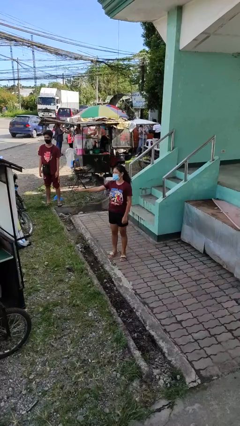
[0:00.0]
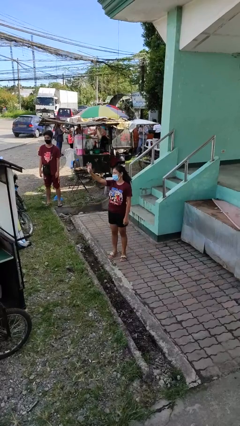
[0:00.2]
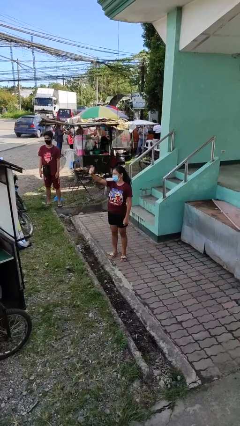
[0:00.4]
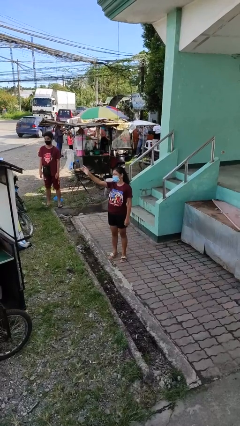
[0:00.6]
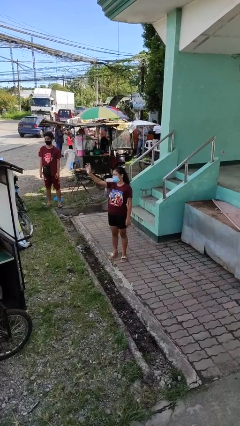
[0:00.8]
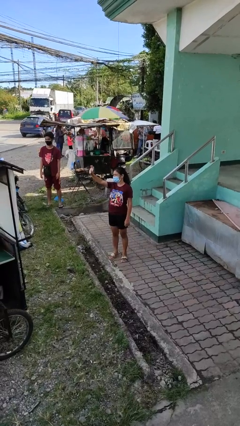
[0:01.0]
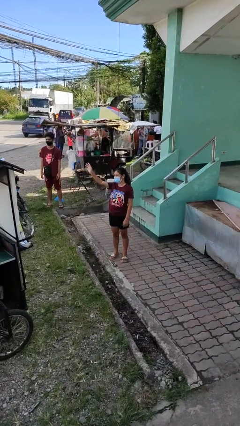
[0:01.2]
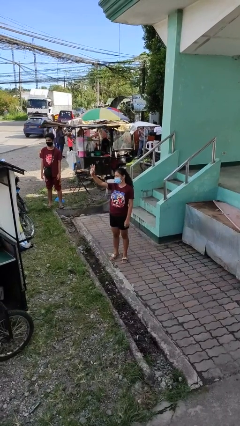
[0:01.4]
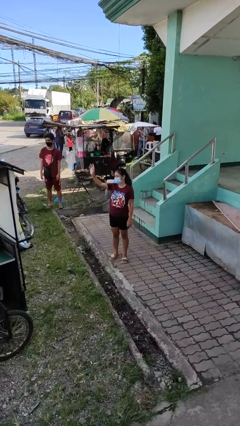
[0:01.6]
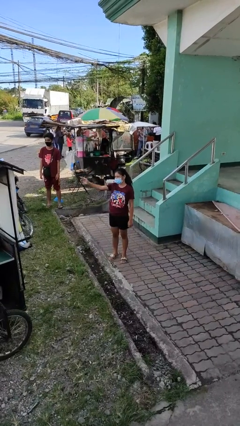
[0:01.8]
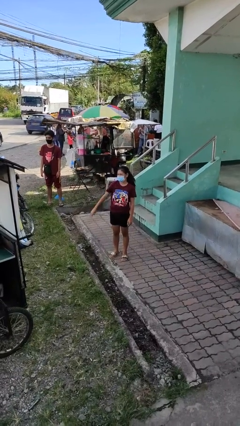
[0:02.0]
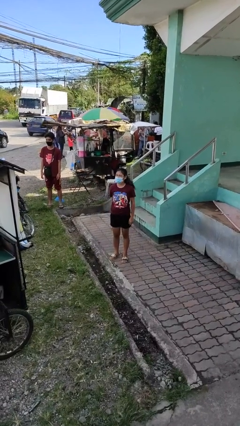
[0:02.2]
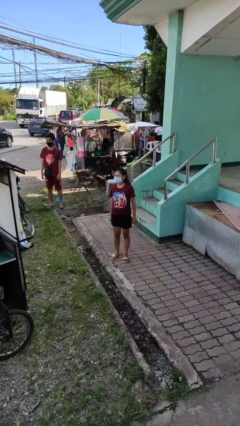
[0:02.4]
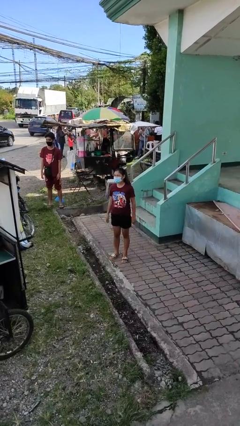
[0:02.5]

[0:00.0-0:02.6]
person waves at person

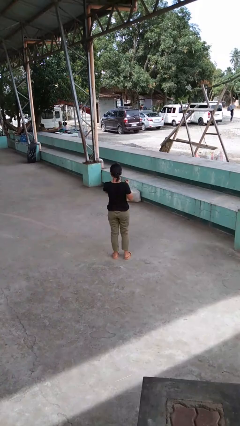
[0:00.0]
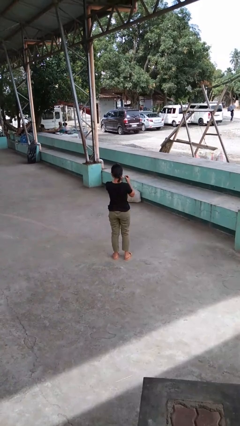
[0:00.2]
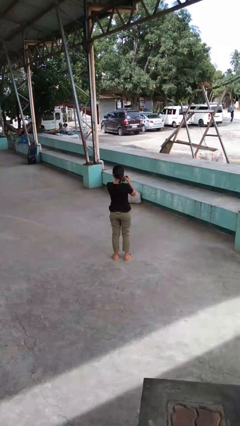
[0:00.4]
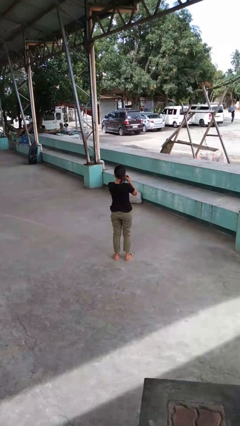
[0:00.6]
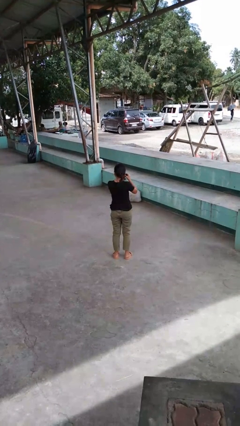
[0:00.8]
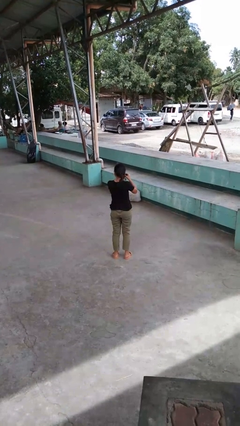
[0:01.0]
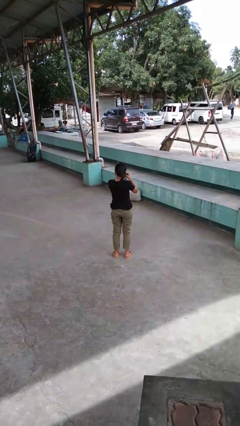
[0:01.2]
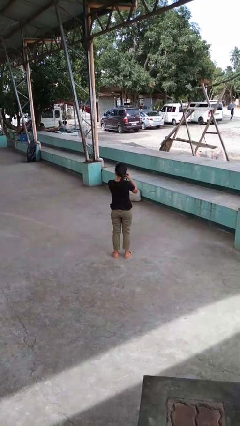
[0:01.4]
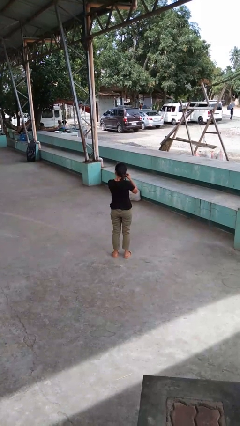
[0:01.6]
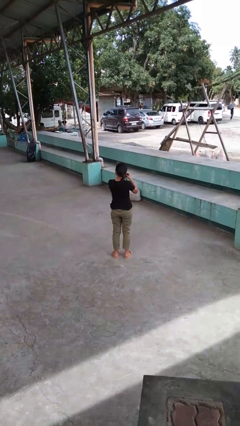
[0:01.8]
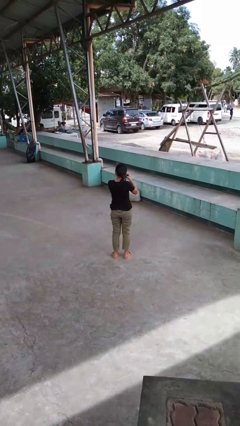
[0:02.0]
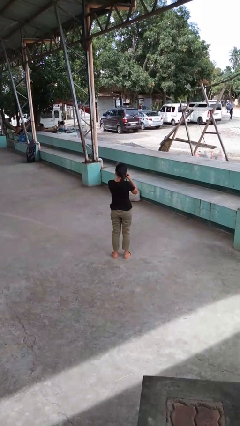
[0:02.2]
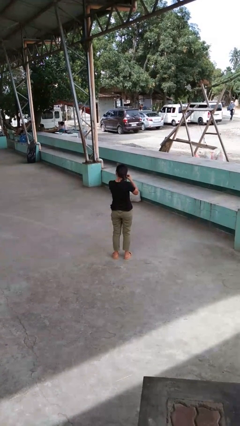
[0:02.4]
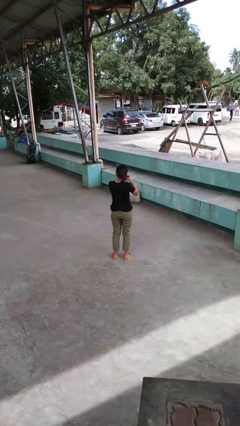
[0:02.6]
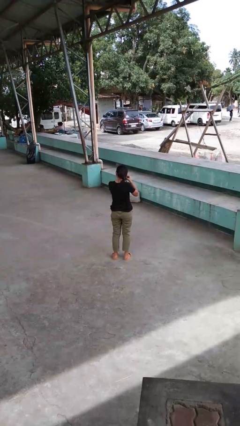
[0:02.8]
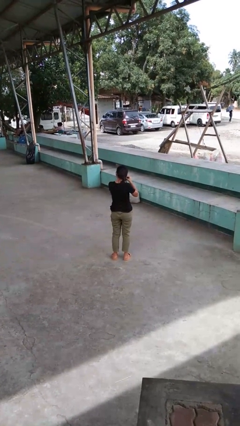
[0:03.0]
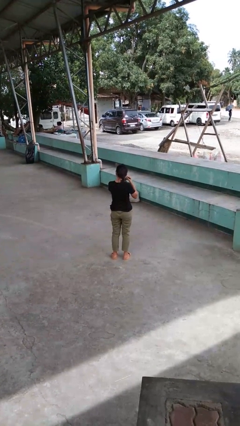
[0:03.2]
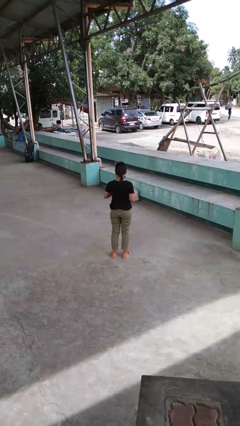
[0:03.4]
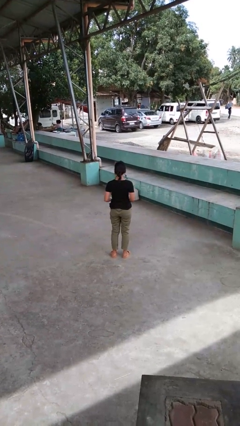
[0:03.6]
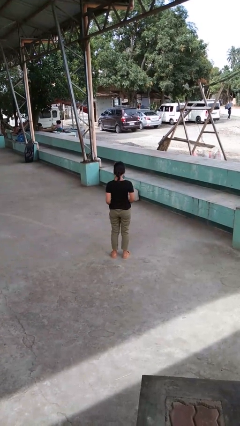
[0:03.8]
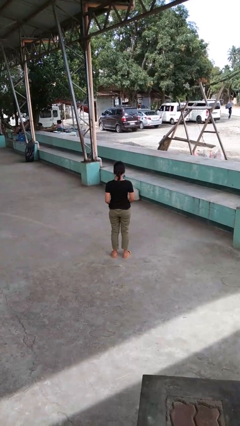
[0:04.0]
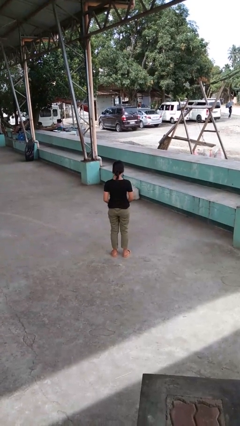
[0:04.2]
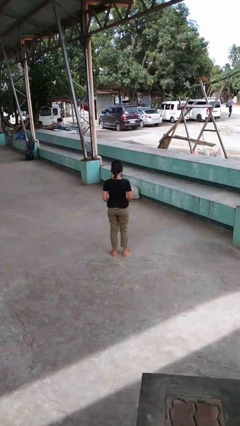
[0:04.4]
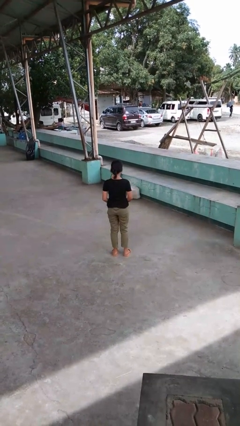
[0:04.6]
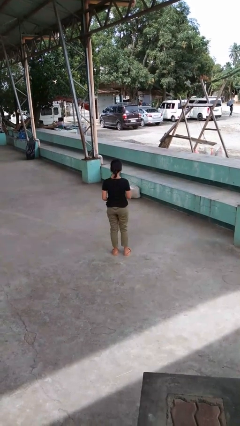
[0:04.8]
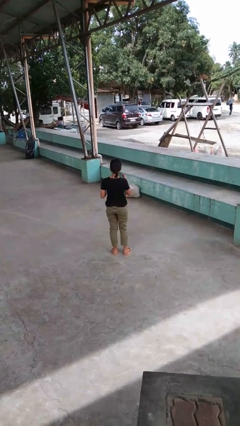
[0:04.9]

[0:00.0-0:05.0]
person puts on earrings

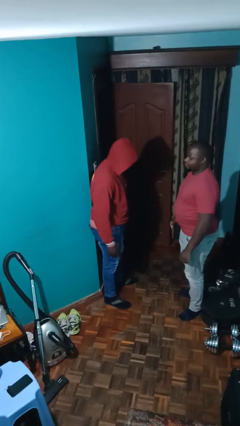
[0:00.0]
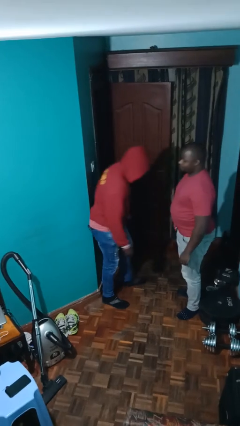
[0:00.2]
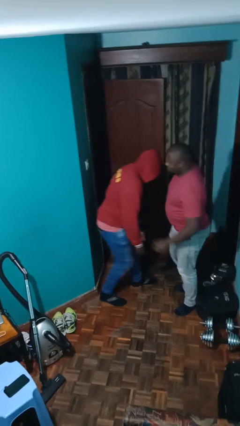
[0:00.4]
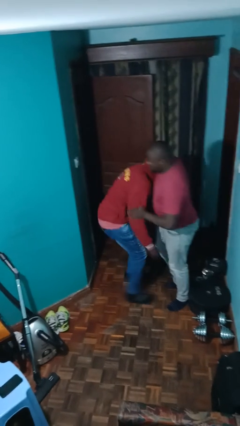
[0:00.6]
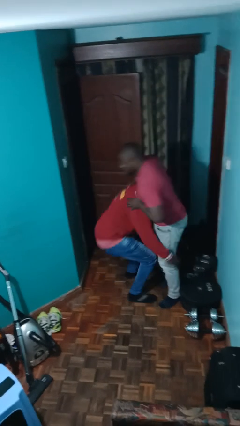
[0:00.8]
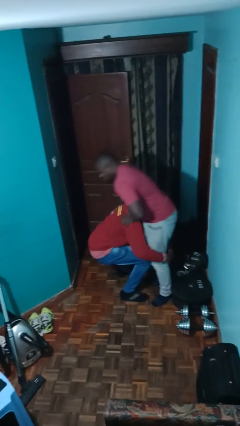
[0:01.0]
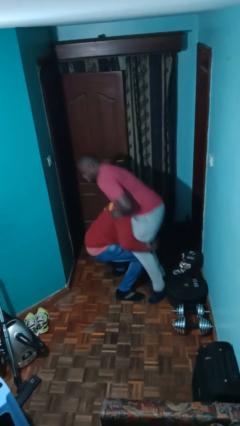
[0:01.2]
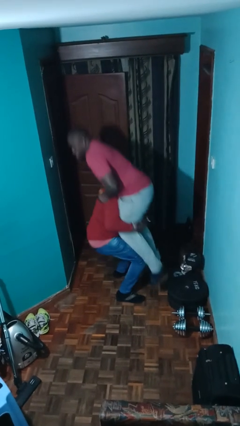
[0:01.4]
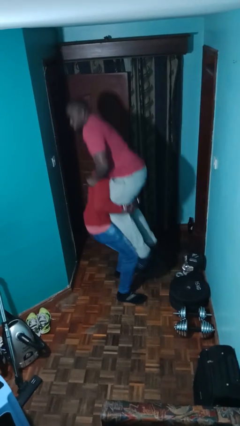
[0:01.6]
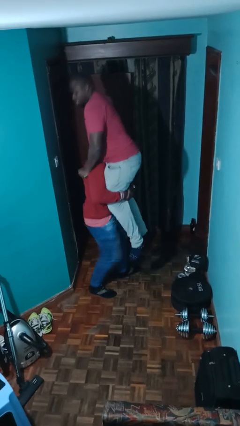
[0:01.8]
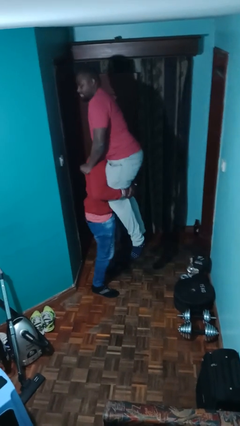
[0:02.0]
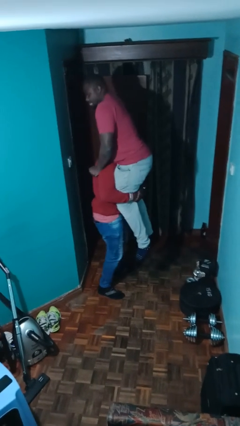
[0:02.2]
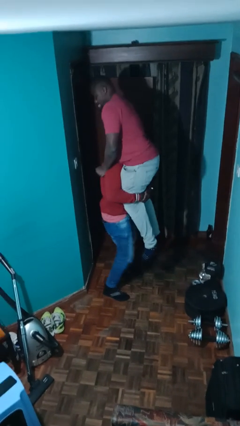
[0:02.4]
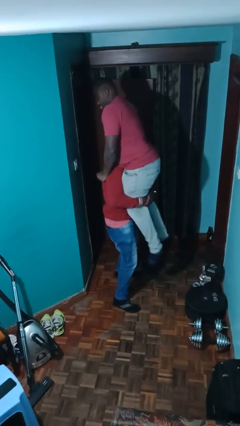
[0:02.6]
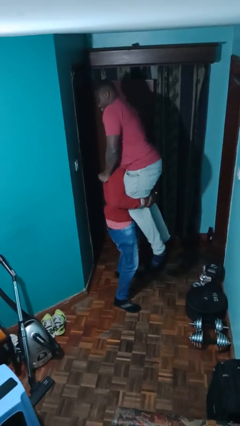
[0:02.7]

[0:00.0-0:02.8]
person picks up person

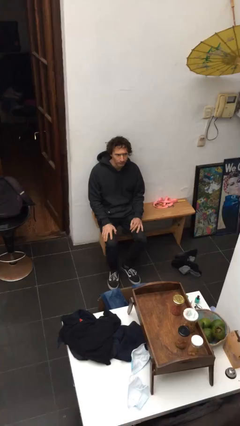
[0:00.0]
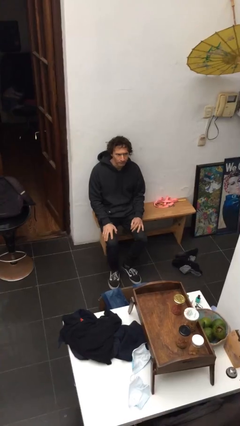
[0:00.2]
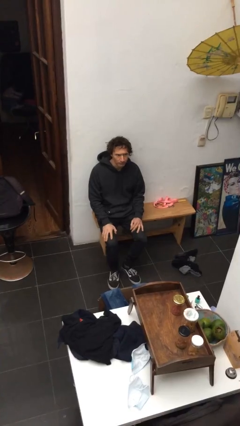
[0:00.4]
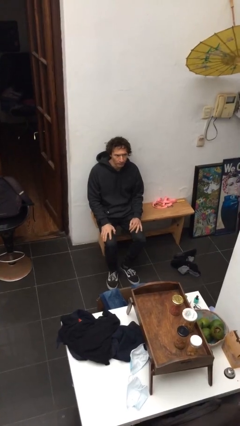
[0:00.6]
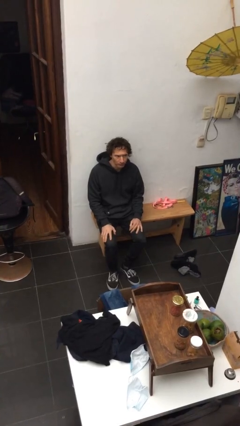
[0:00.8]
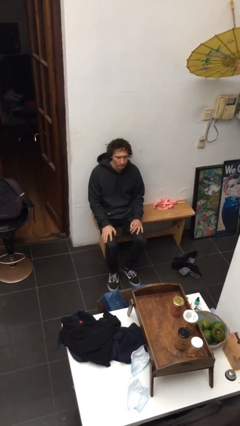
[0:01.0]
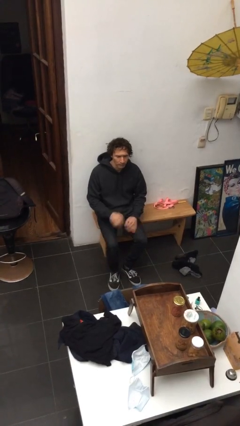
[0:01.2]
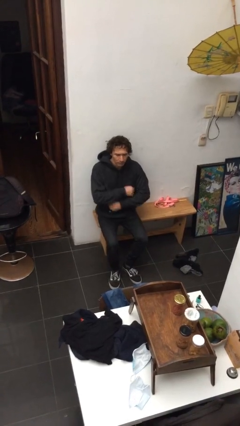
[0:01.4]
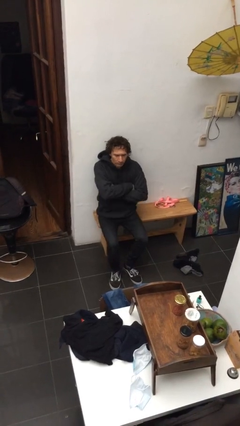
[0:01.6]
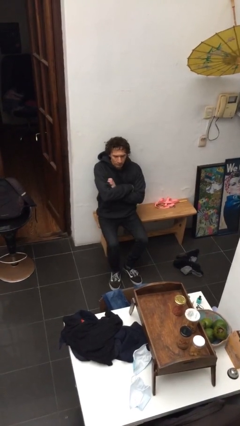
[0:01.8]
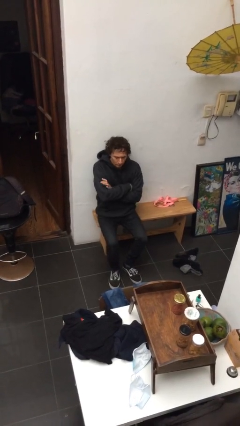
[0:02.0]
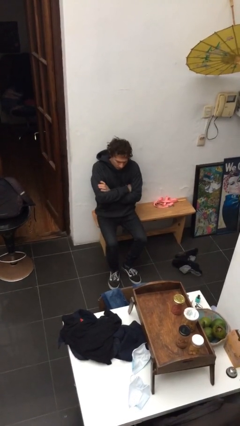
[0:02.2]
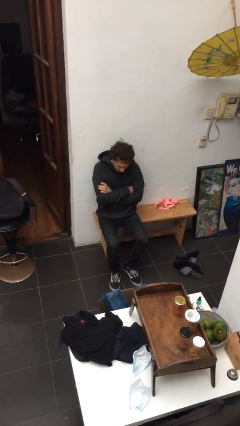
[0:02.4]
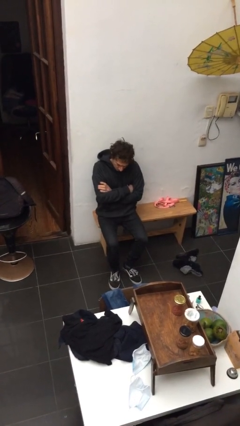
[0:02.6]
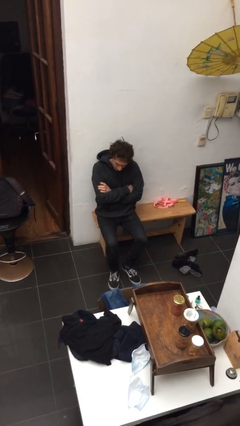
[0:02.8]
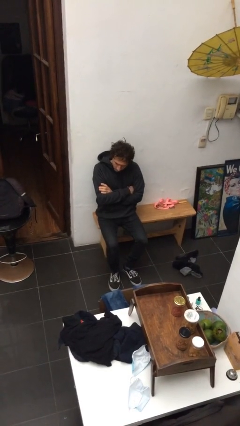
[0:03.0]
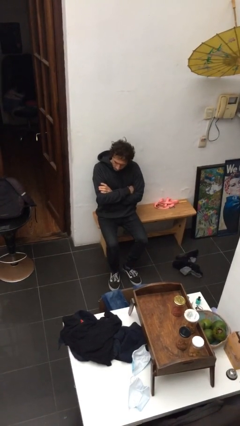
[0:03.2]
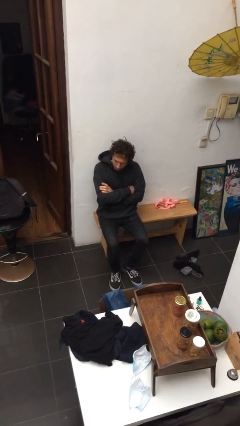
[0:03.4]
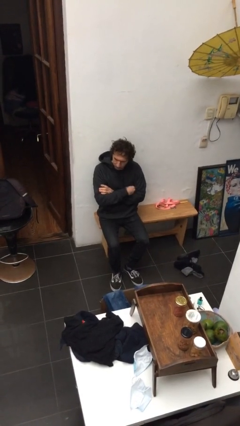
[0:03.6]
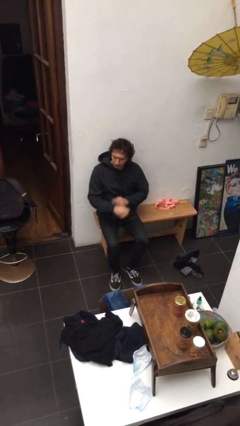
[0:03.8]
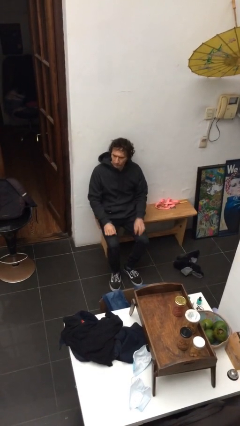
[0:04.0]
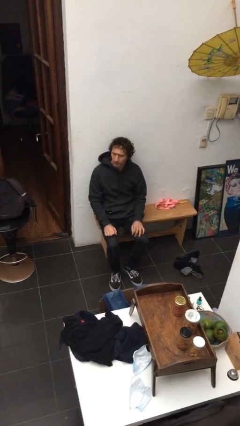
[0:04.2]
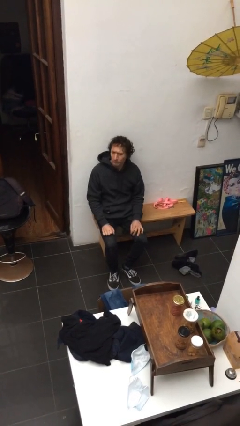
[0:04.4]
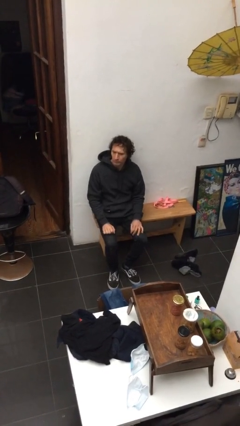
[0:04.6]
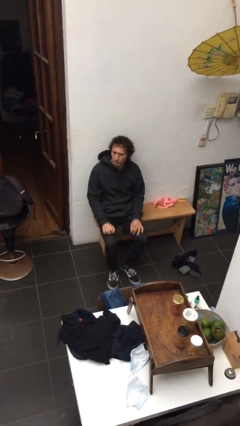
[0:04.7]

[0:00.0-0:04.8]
person crosses arms

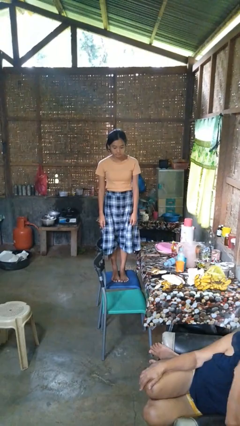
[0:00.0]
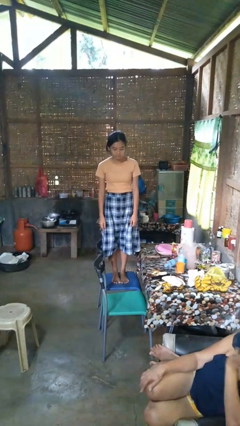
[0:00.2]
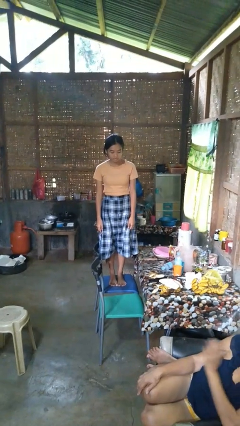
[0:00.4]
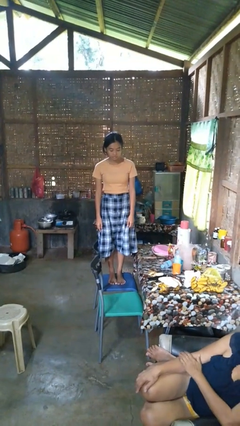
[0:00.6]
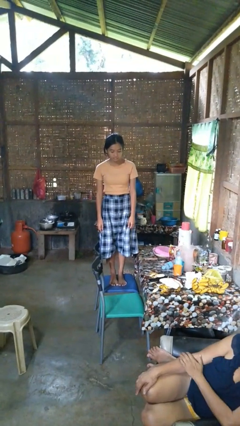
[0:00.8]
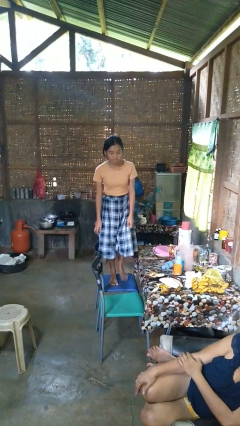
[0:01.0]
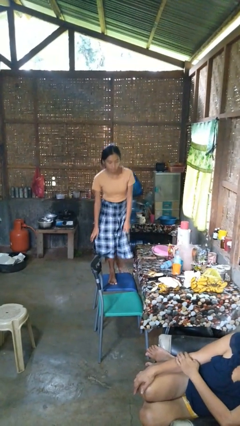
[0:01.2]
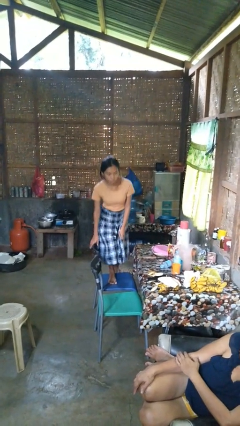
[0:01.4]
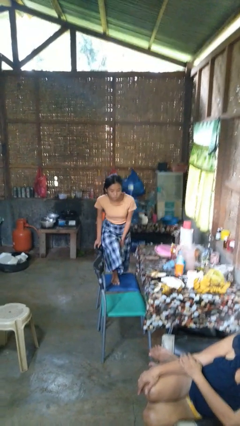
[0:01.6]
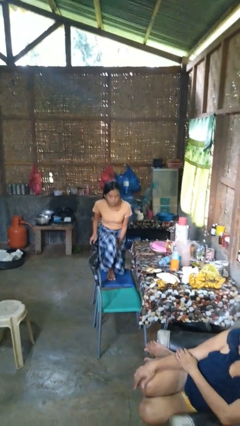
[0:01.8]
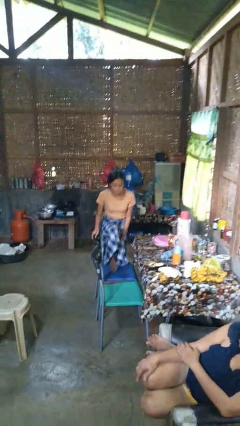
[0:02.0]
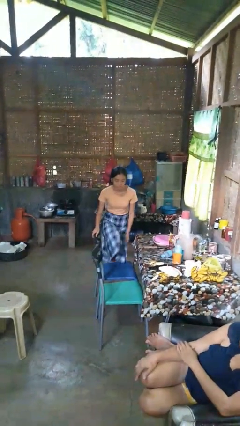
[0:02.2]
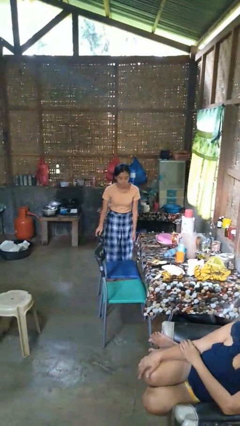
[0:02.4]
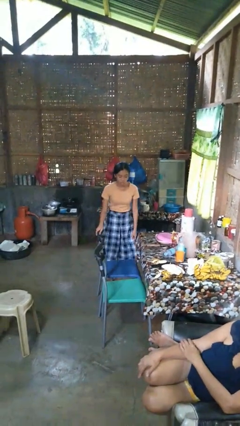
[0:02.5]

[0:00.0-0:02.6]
person climbs off couch
